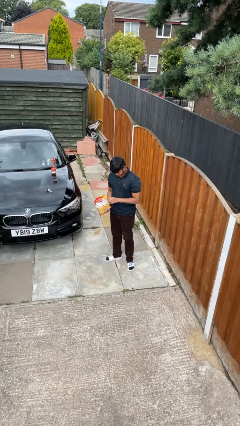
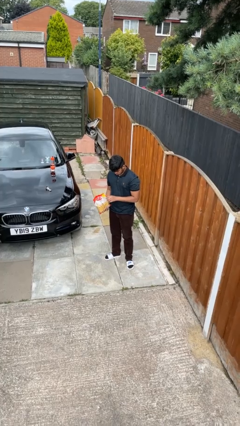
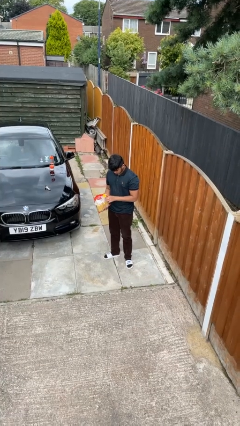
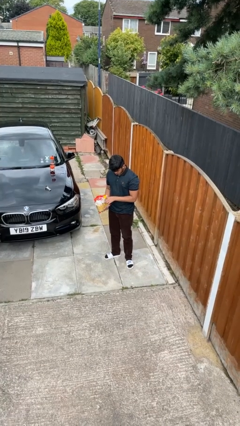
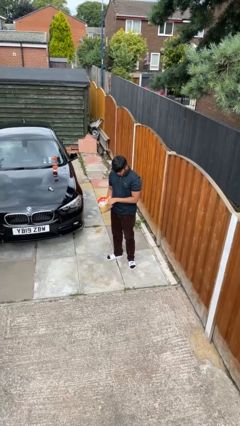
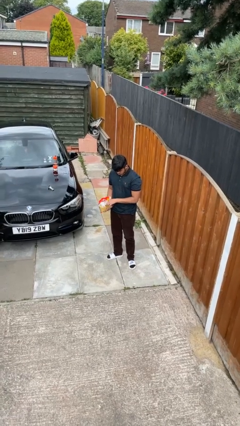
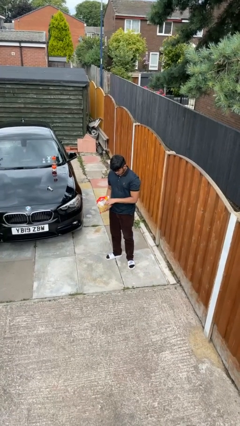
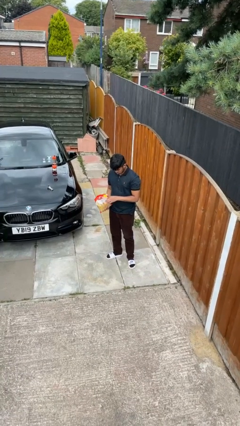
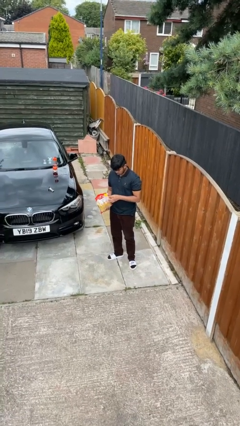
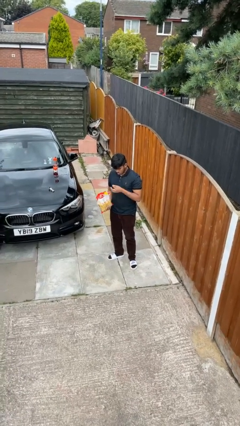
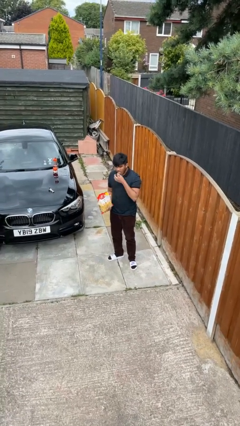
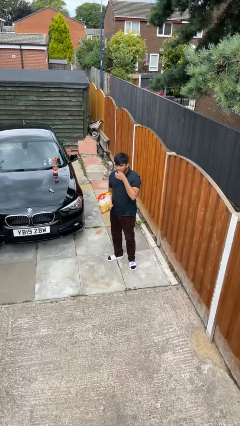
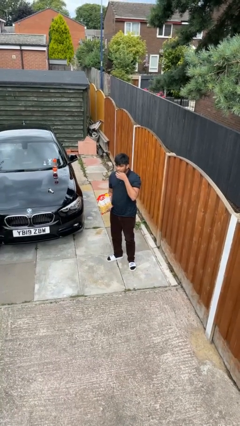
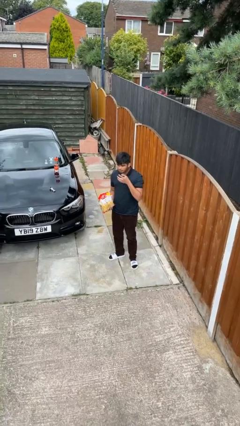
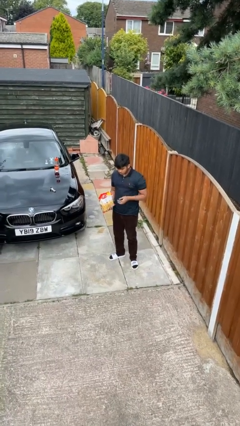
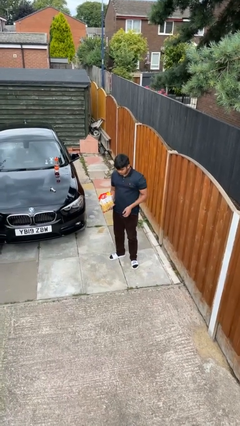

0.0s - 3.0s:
person eats snack from bag

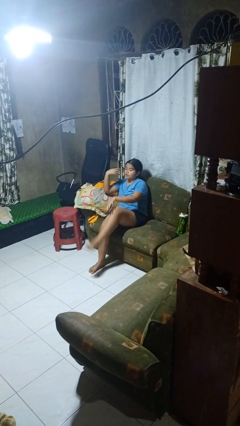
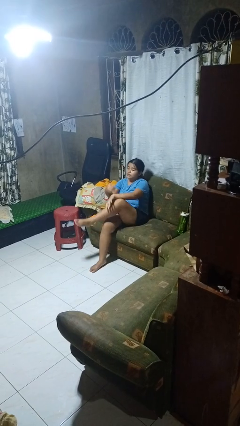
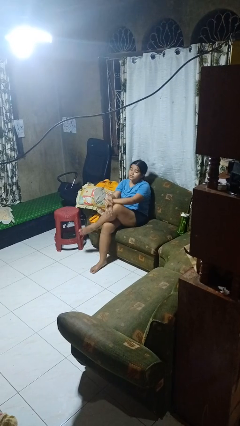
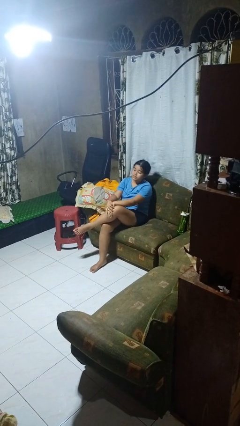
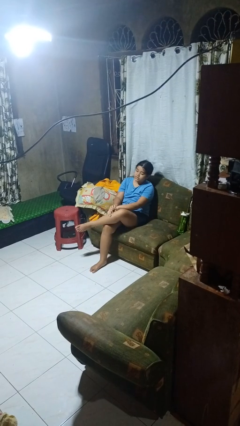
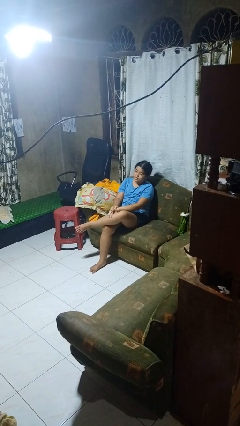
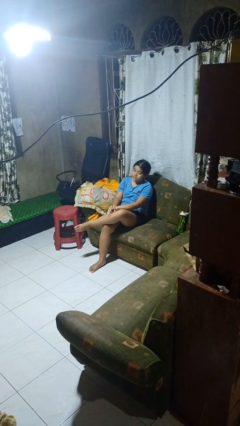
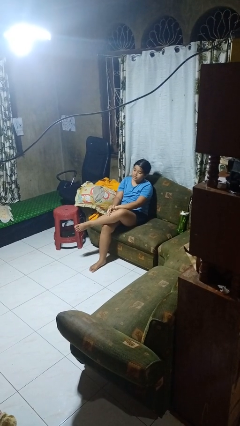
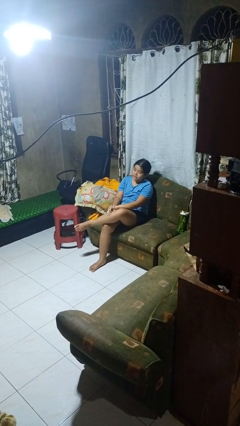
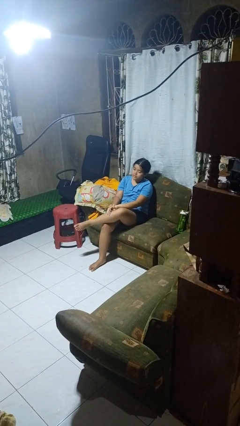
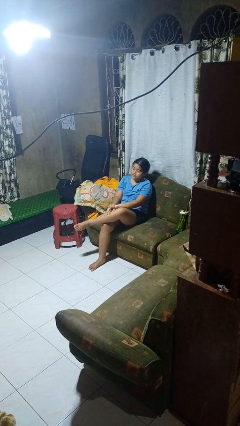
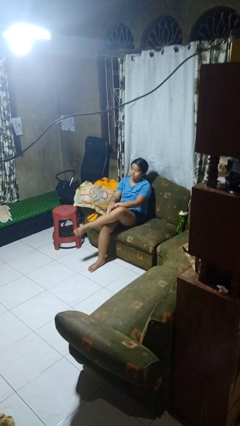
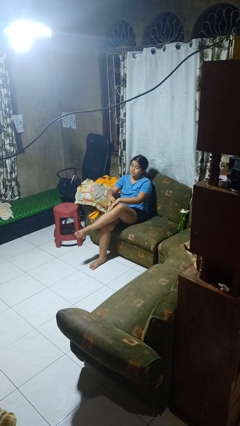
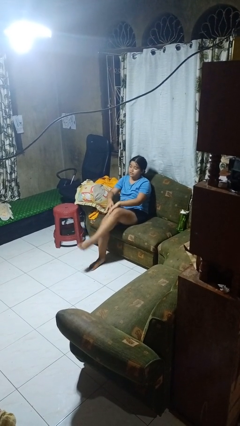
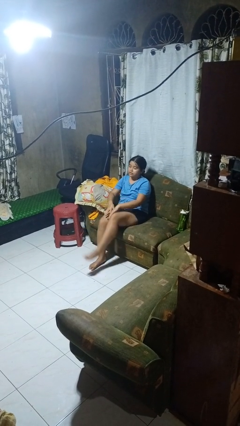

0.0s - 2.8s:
person crosses legs

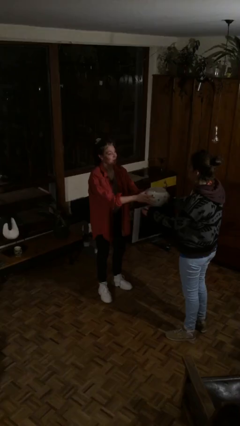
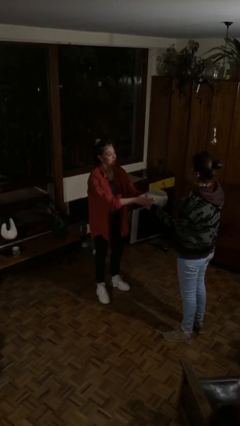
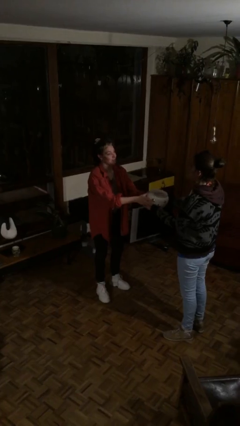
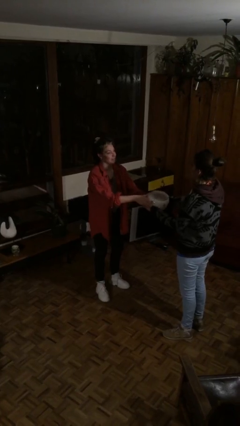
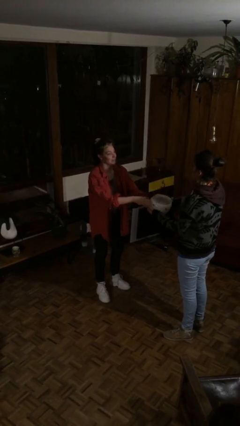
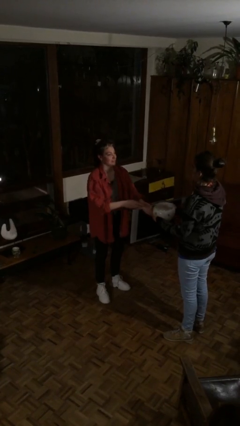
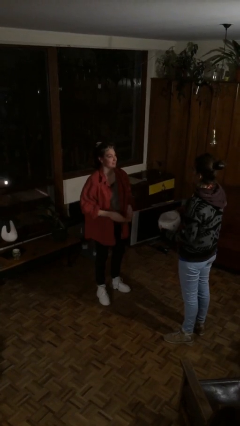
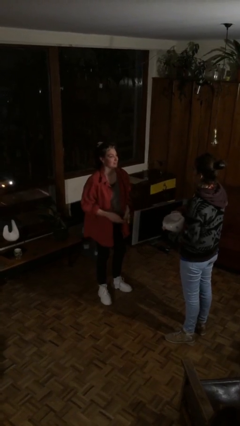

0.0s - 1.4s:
person transfers object to person

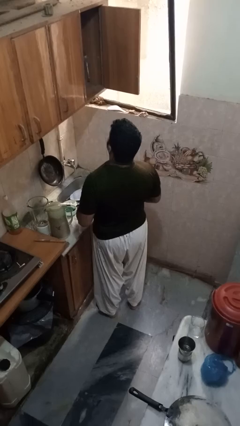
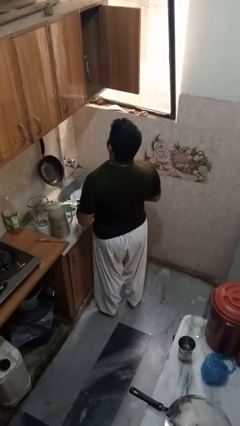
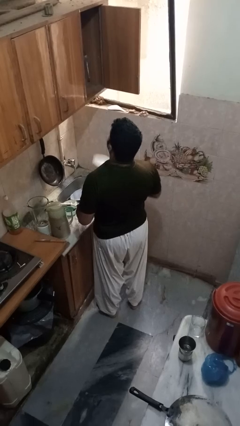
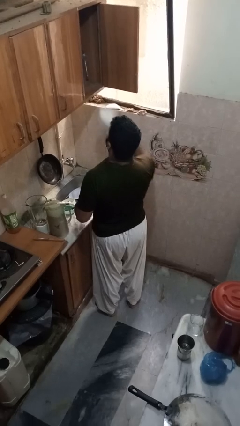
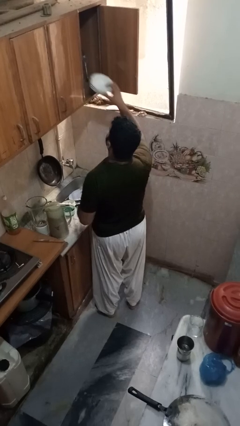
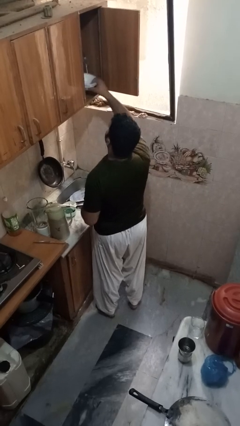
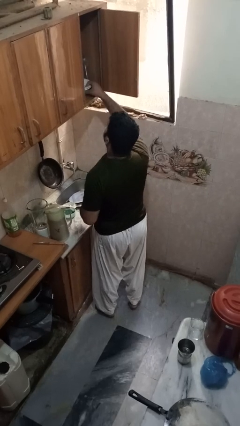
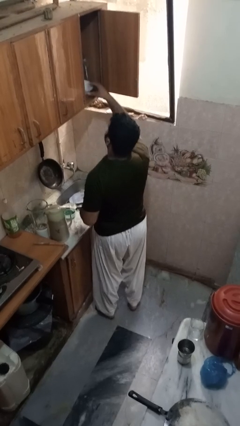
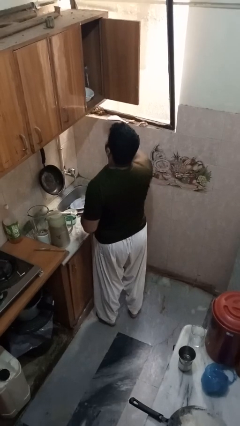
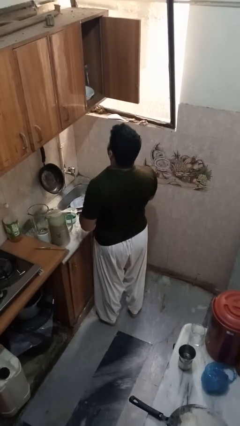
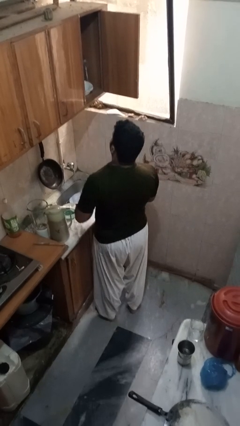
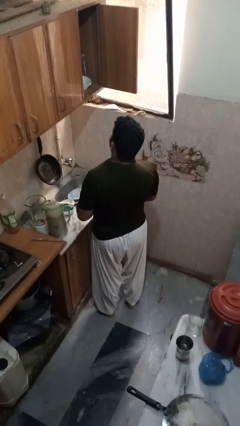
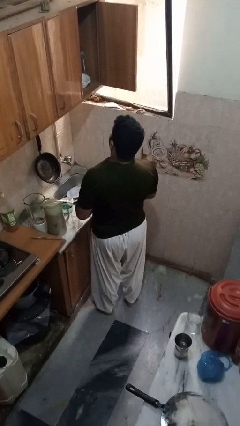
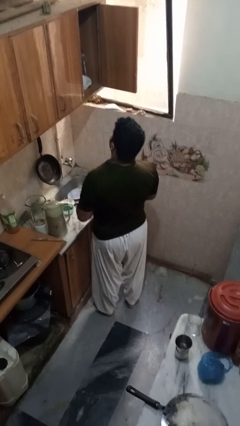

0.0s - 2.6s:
person puts object in cabinet

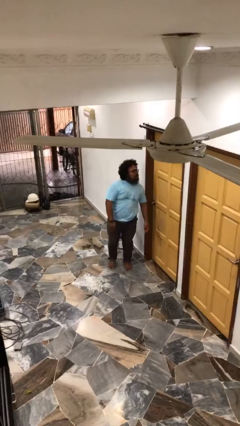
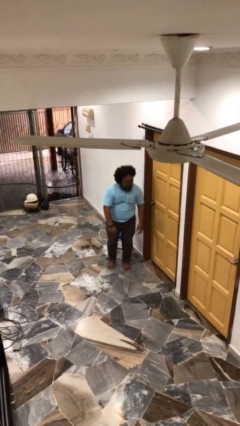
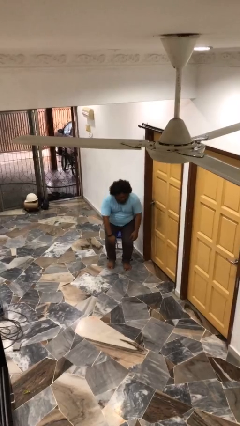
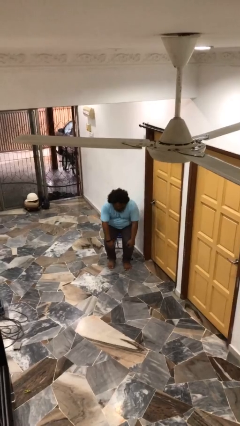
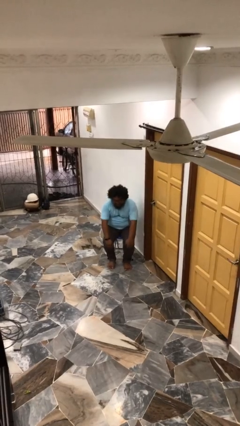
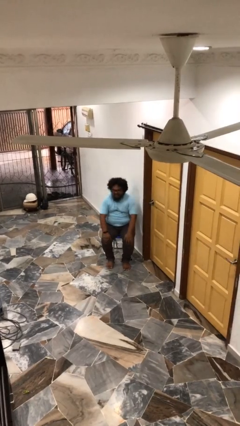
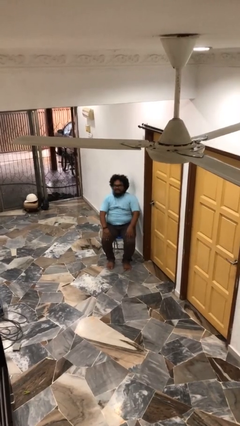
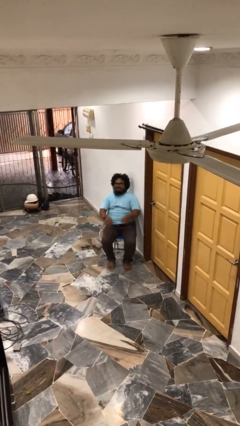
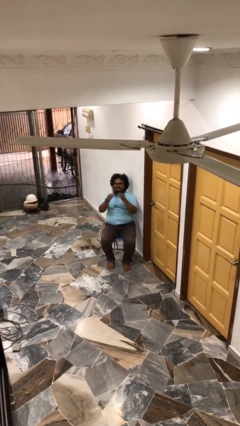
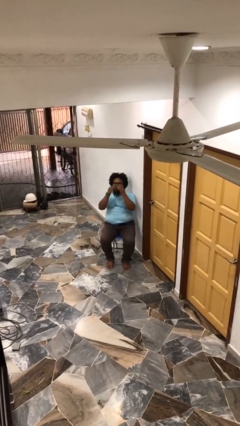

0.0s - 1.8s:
person sits down

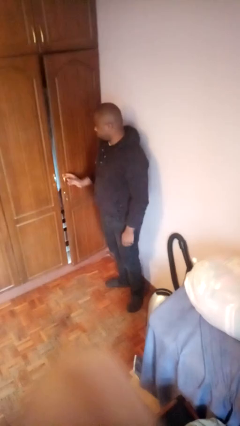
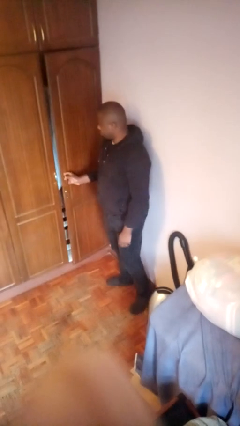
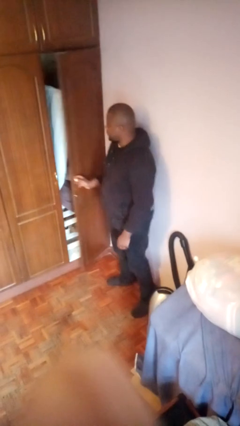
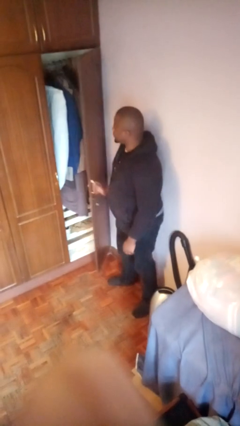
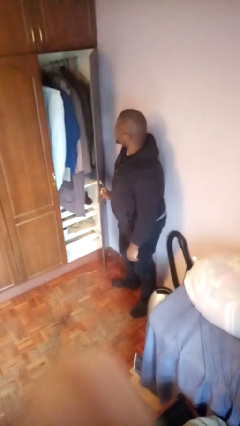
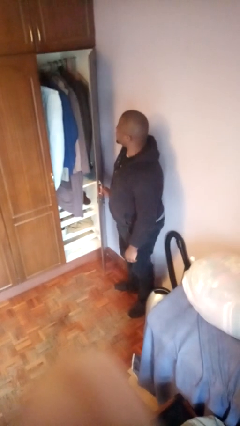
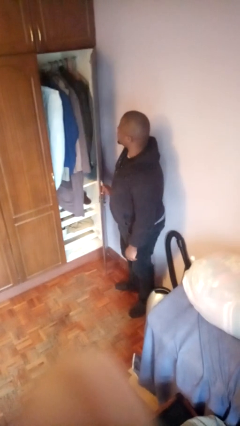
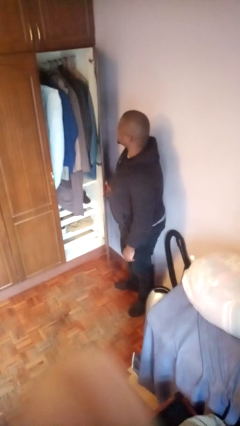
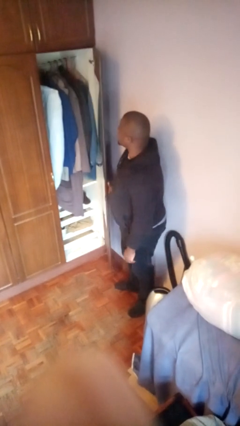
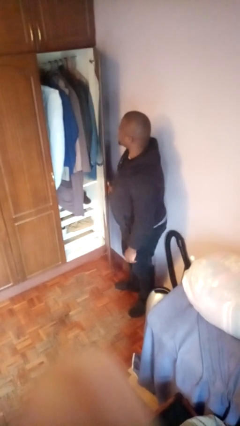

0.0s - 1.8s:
person opens closet door

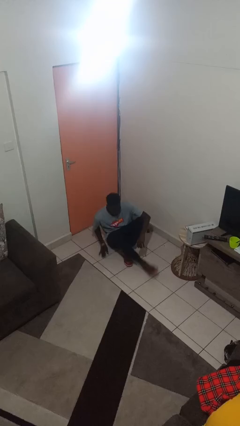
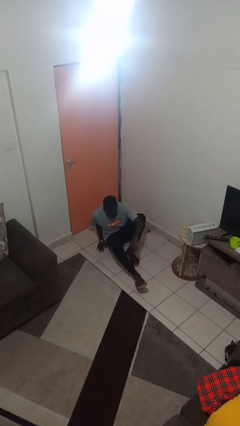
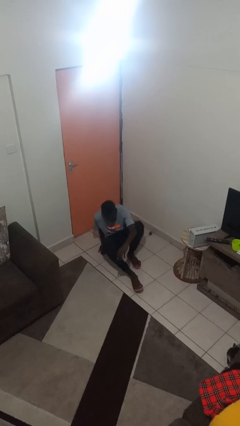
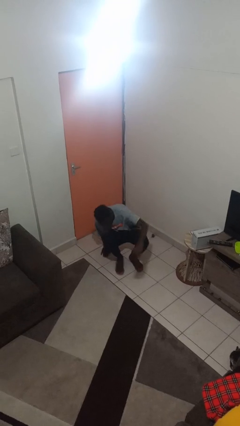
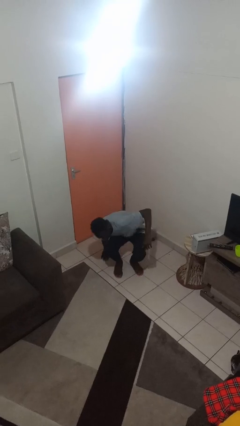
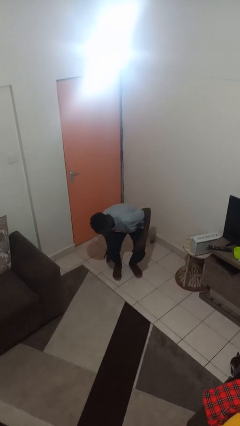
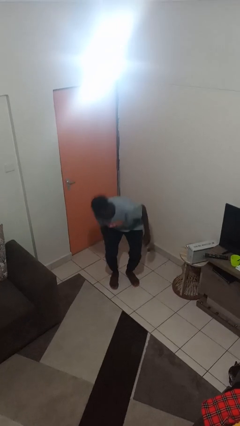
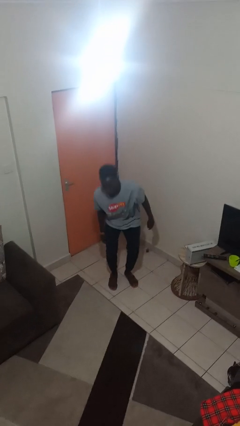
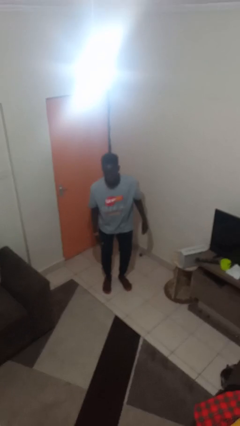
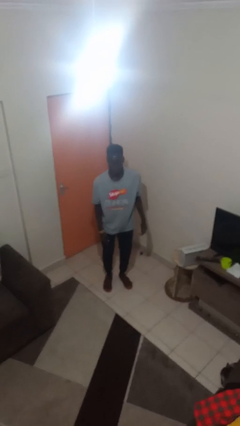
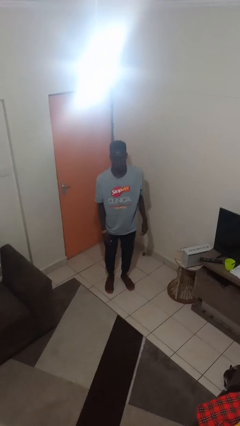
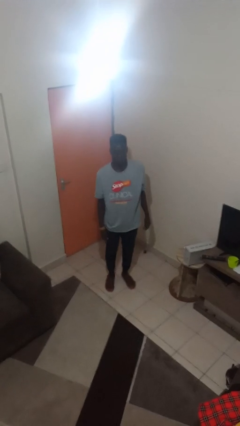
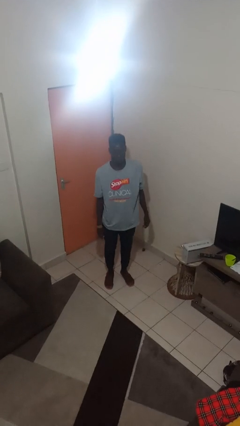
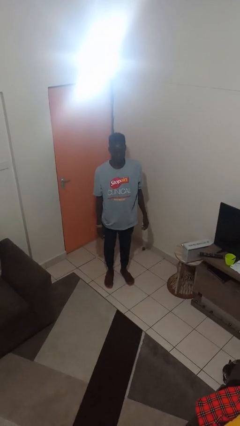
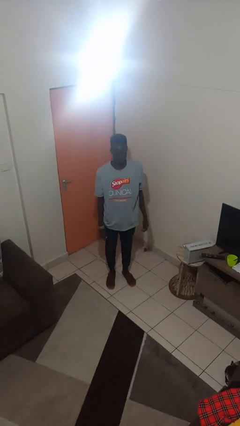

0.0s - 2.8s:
person stands up from floor

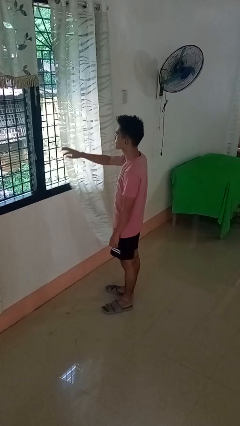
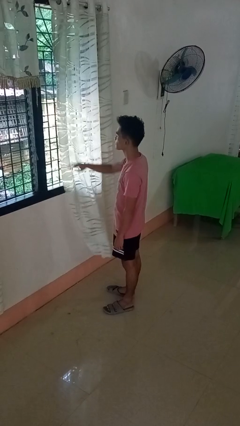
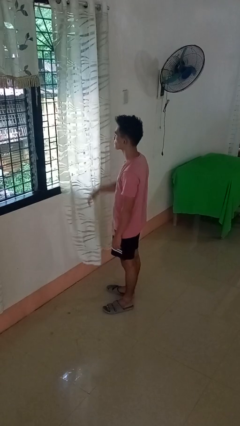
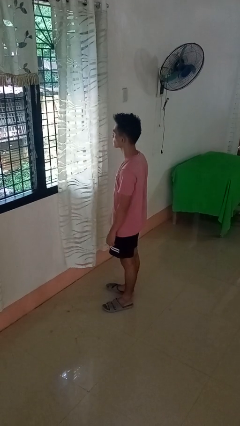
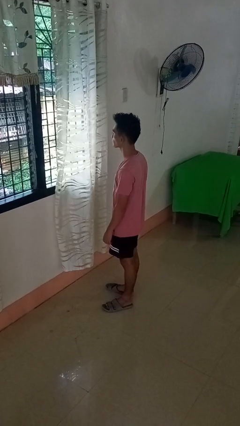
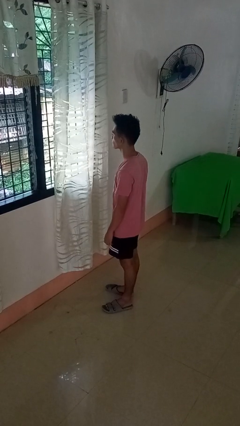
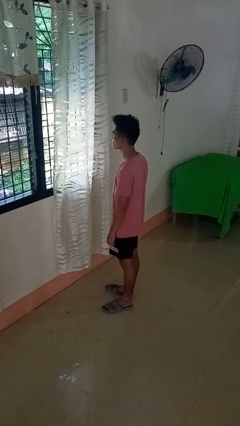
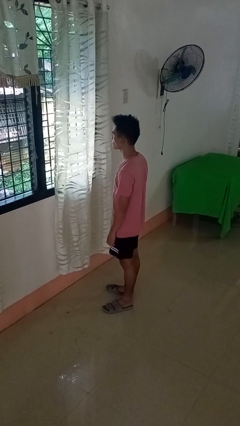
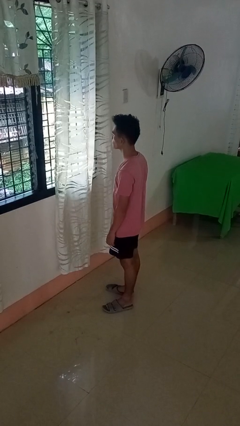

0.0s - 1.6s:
person closes curtains
